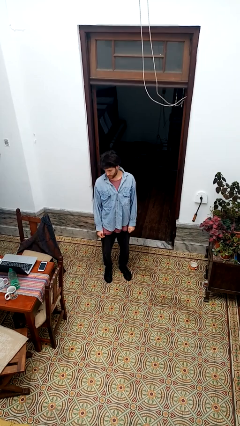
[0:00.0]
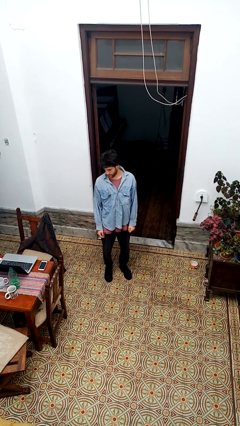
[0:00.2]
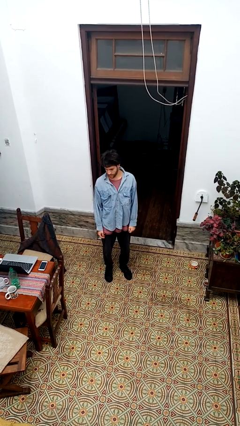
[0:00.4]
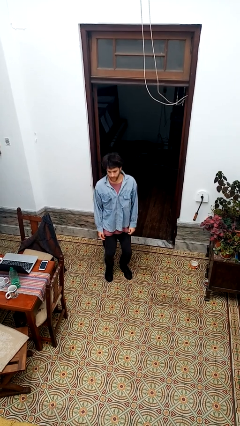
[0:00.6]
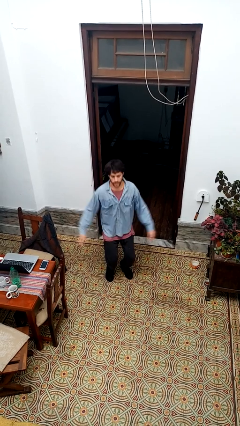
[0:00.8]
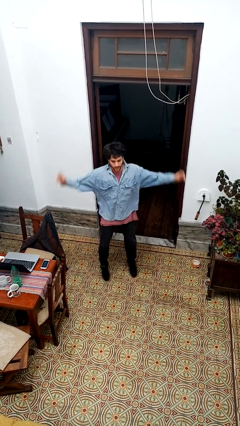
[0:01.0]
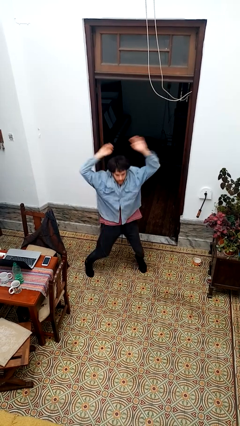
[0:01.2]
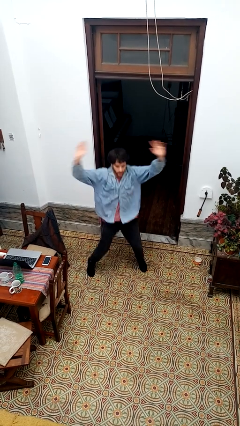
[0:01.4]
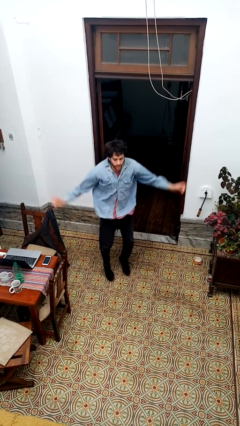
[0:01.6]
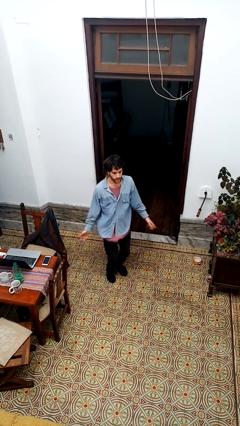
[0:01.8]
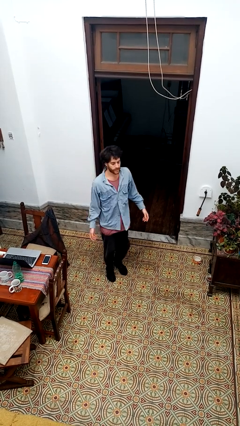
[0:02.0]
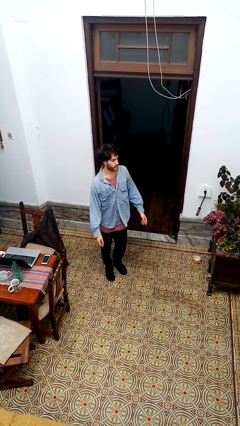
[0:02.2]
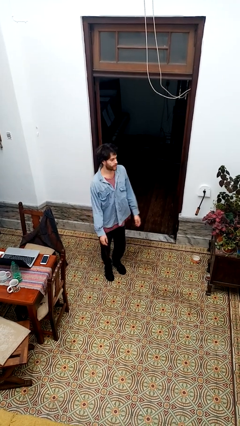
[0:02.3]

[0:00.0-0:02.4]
person exercises with jumping jacks

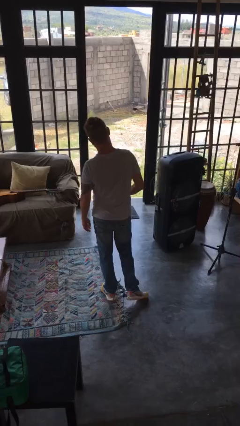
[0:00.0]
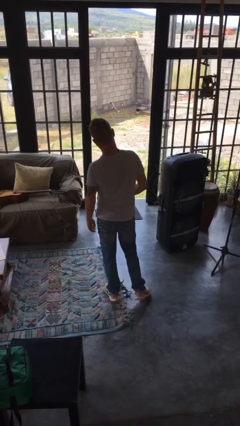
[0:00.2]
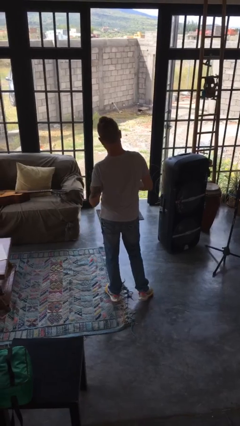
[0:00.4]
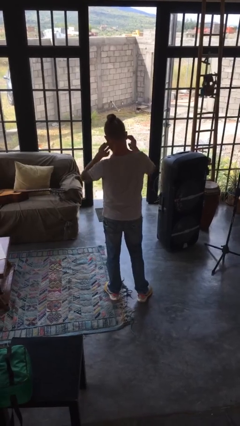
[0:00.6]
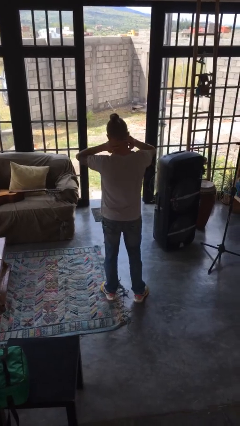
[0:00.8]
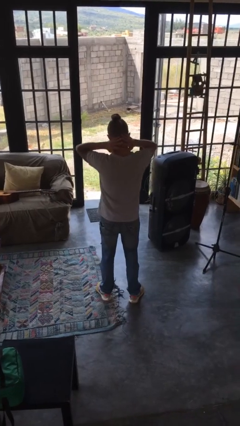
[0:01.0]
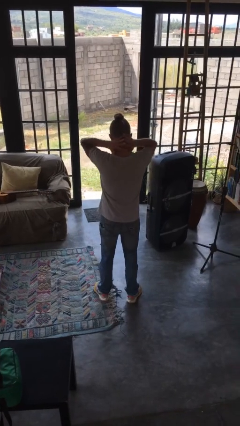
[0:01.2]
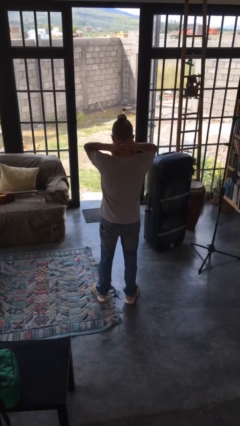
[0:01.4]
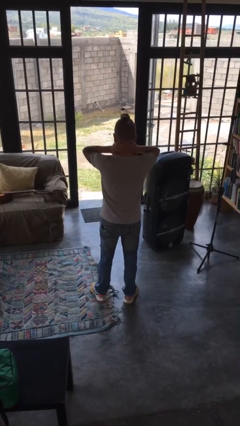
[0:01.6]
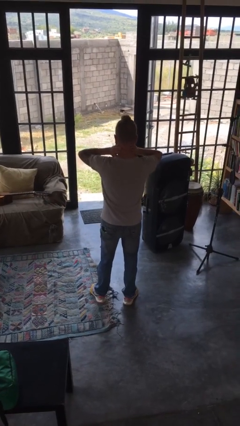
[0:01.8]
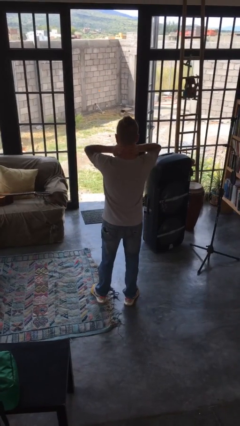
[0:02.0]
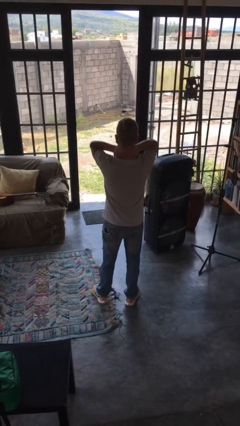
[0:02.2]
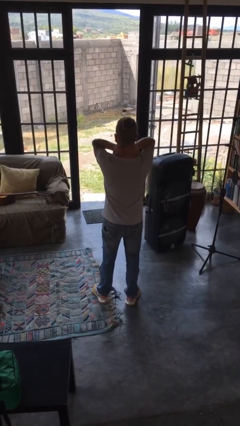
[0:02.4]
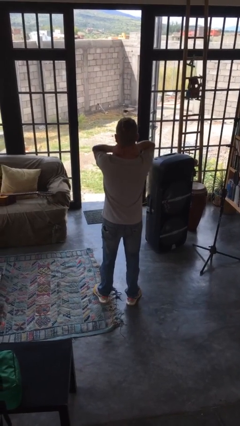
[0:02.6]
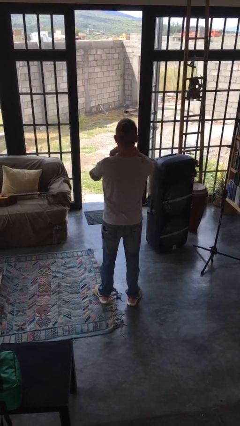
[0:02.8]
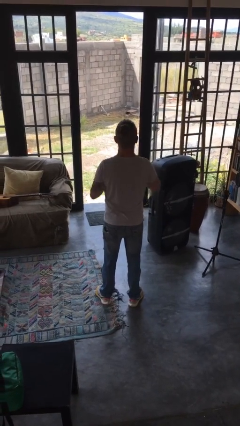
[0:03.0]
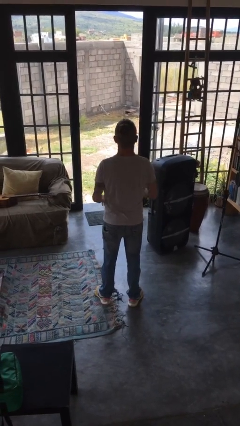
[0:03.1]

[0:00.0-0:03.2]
person rubs neck

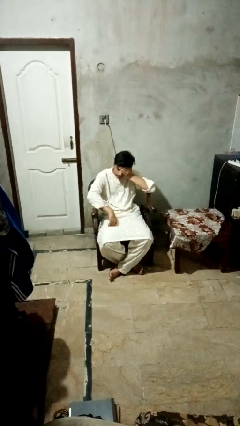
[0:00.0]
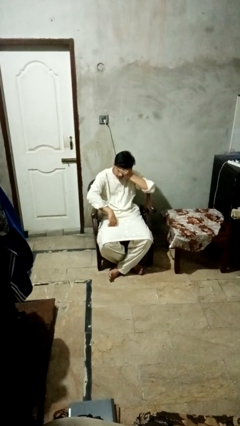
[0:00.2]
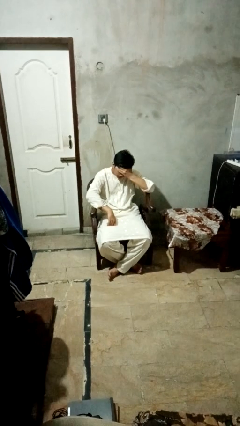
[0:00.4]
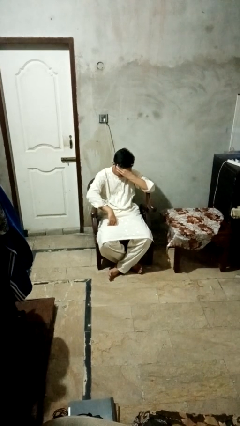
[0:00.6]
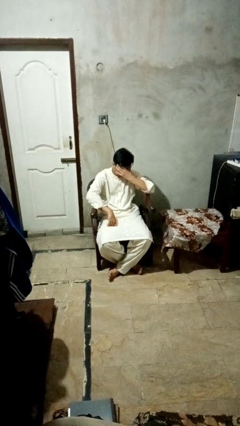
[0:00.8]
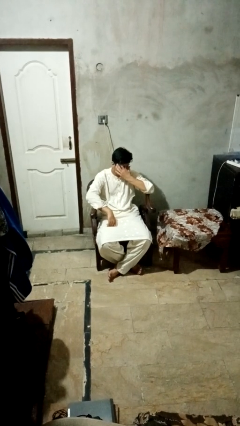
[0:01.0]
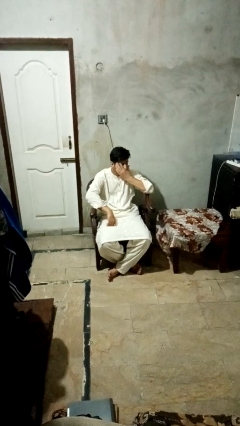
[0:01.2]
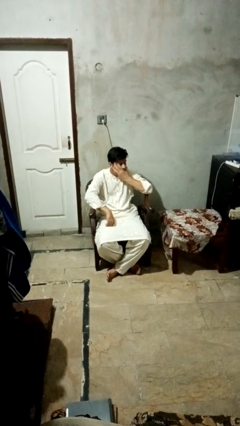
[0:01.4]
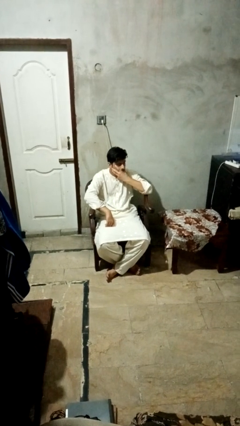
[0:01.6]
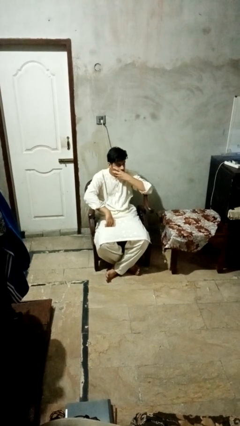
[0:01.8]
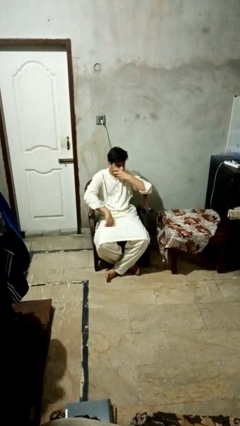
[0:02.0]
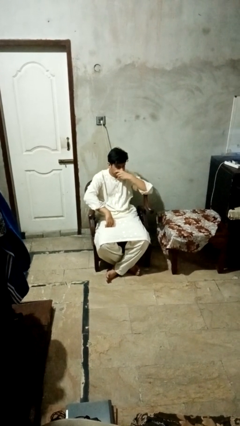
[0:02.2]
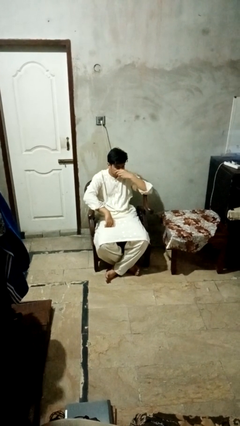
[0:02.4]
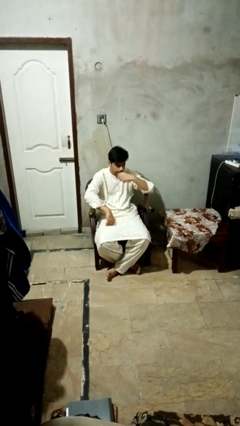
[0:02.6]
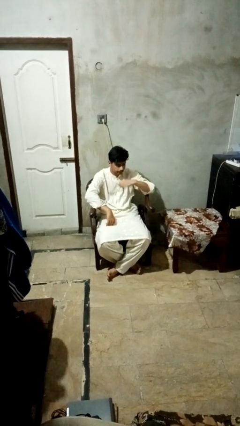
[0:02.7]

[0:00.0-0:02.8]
person covers face with hands

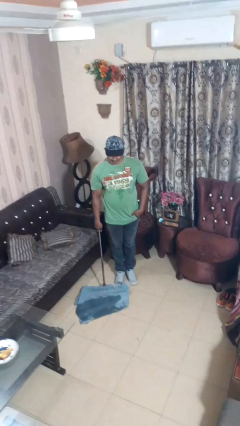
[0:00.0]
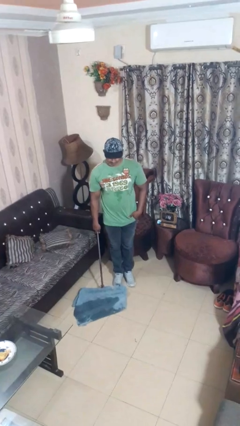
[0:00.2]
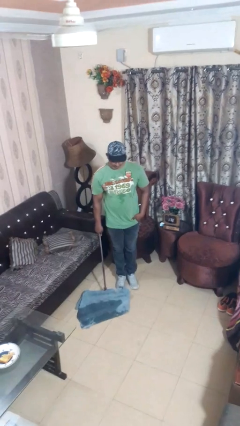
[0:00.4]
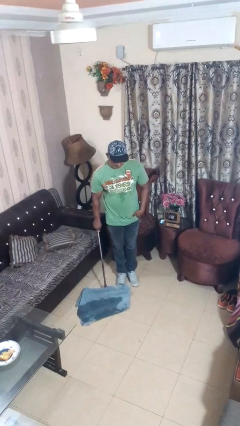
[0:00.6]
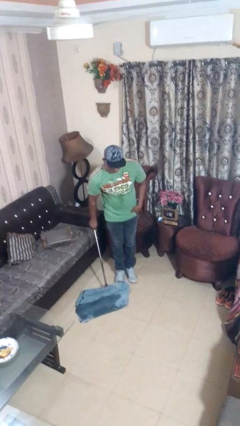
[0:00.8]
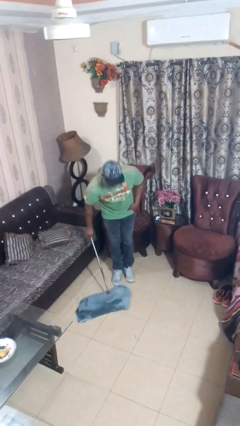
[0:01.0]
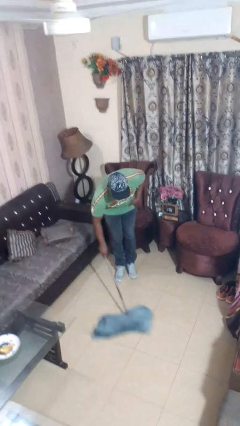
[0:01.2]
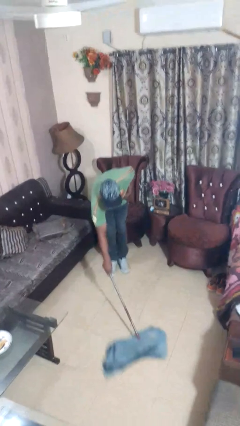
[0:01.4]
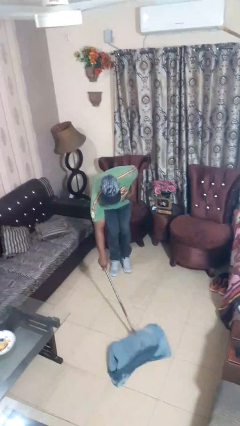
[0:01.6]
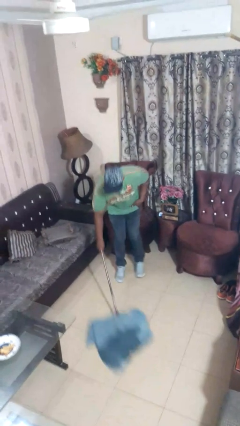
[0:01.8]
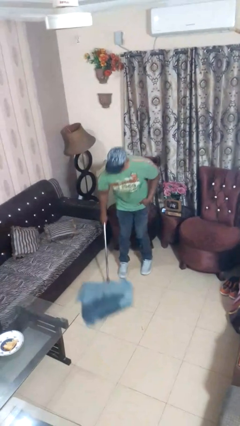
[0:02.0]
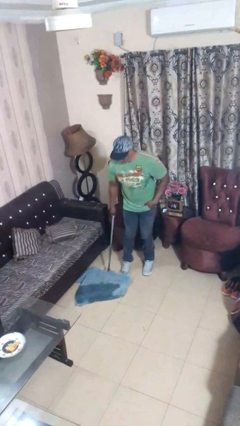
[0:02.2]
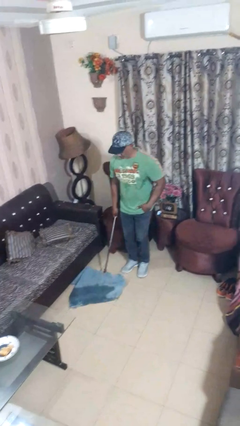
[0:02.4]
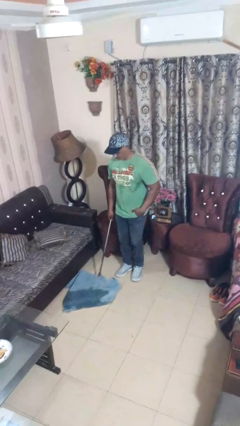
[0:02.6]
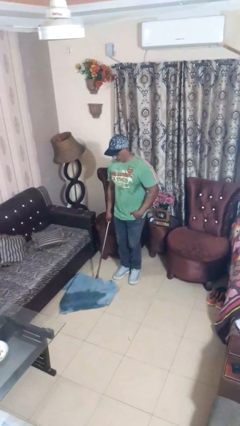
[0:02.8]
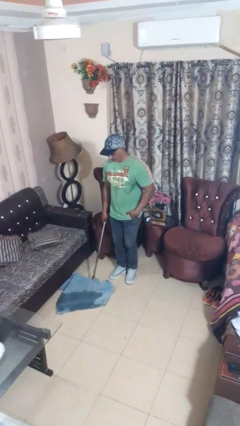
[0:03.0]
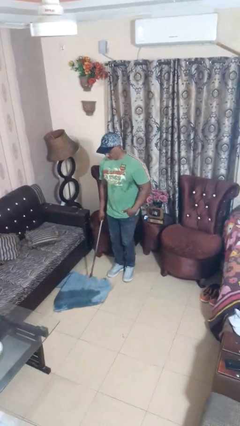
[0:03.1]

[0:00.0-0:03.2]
person mops

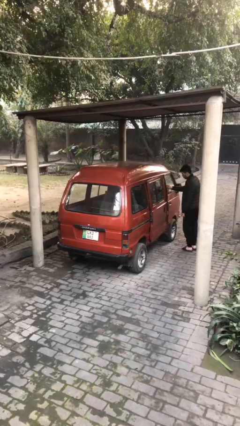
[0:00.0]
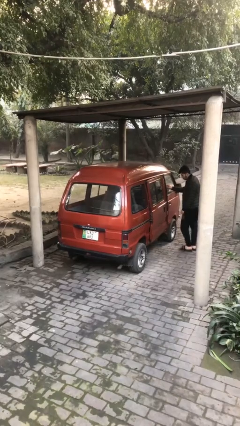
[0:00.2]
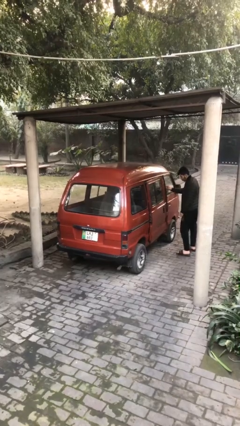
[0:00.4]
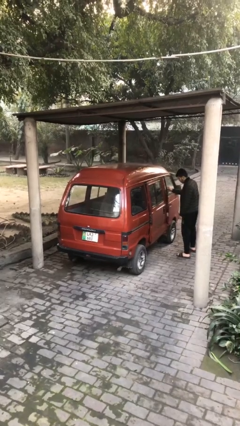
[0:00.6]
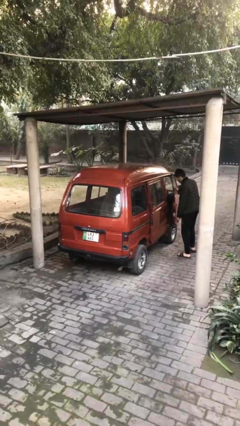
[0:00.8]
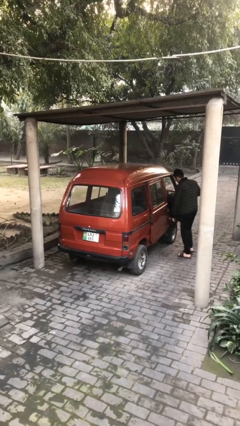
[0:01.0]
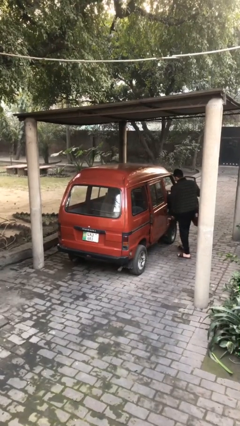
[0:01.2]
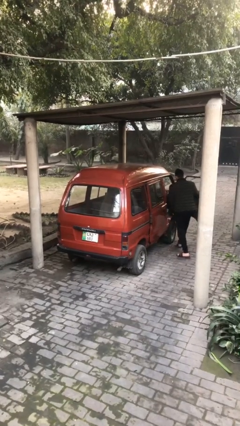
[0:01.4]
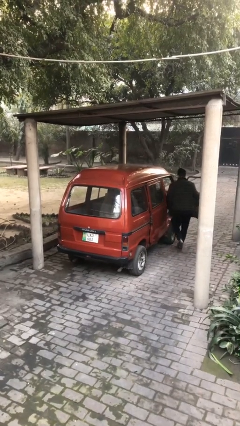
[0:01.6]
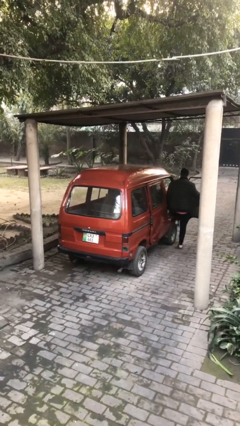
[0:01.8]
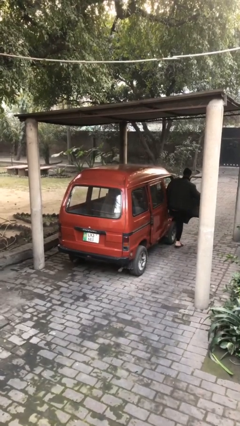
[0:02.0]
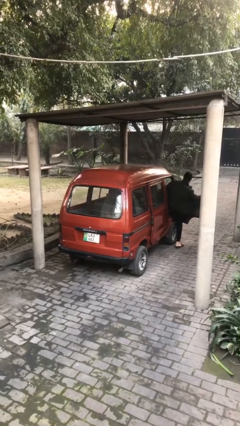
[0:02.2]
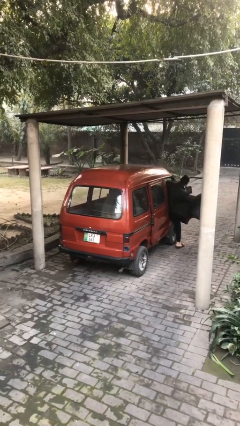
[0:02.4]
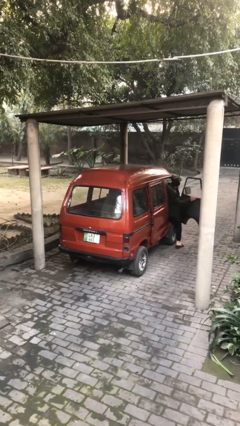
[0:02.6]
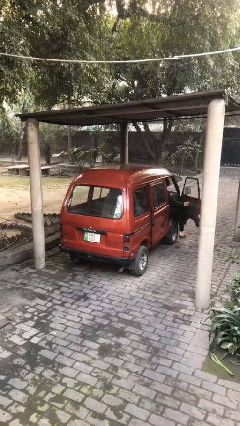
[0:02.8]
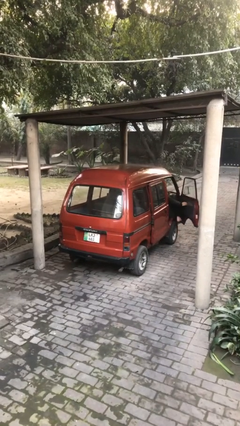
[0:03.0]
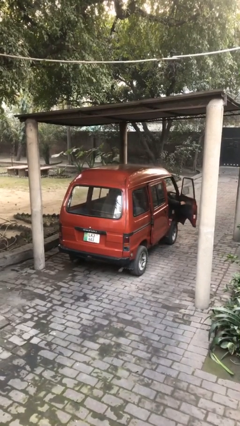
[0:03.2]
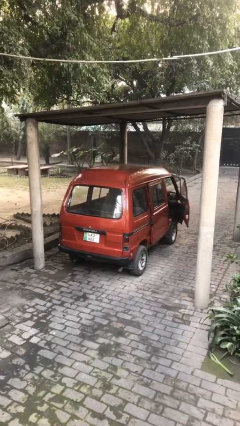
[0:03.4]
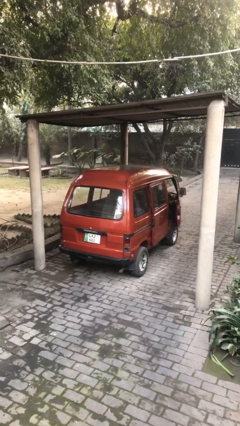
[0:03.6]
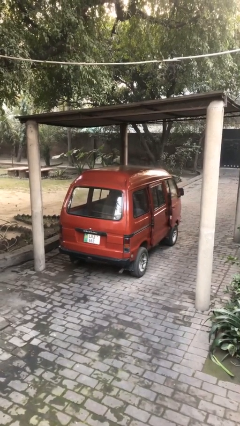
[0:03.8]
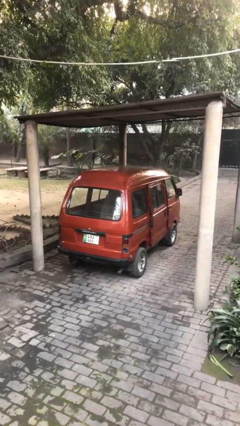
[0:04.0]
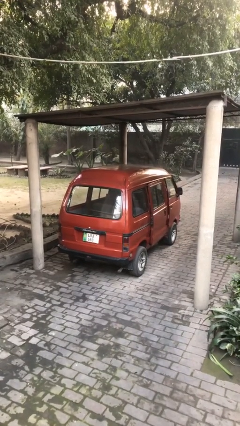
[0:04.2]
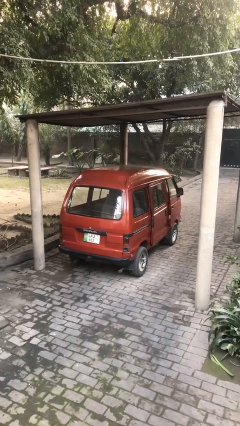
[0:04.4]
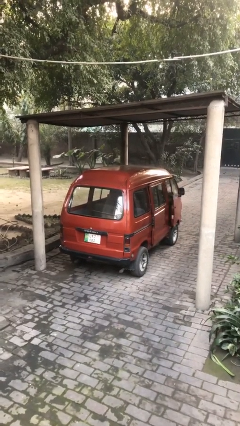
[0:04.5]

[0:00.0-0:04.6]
car picks up person

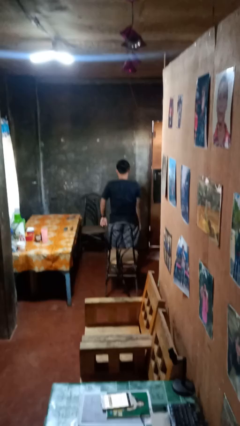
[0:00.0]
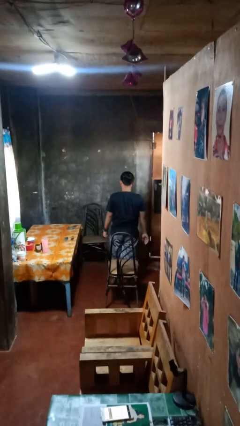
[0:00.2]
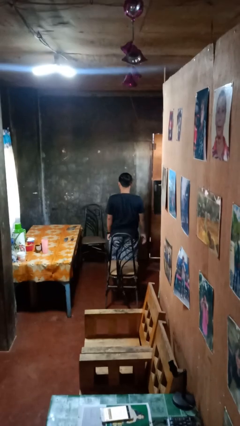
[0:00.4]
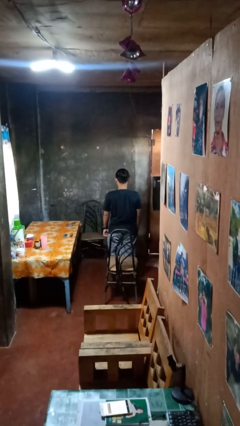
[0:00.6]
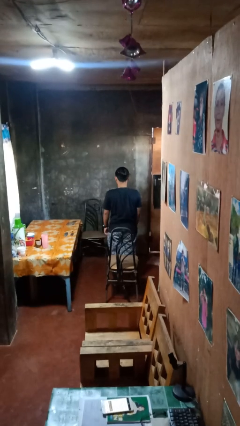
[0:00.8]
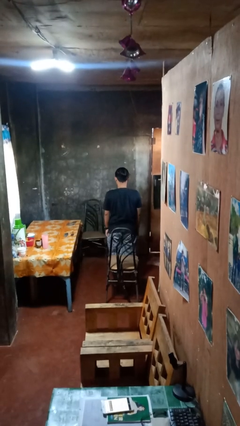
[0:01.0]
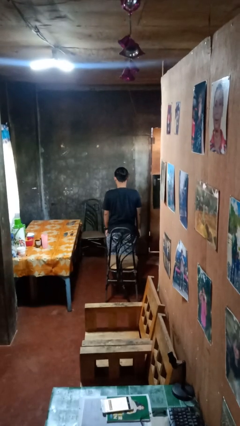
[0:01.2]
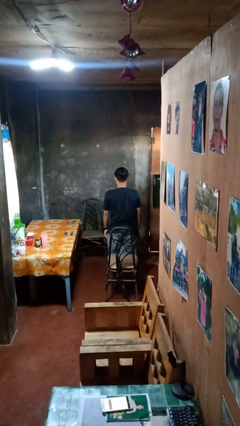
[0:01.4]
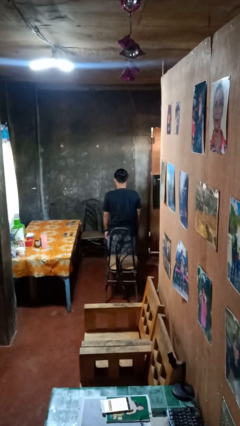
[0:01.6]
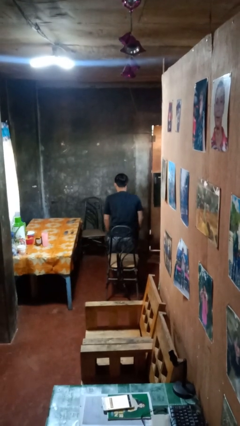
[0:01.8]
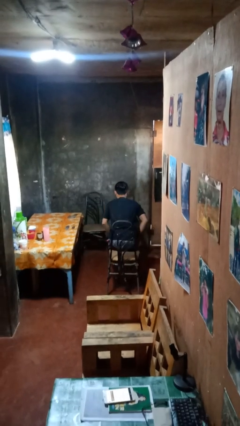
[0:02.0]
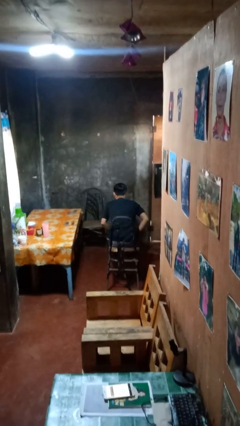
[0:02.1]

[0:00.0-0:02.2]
person stands up from floor
